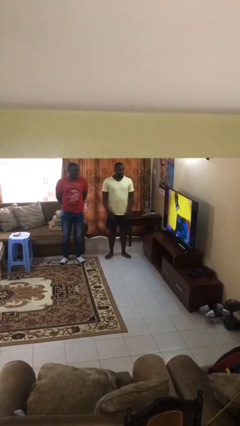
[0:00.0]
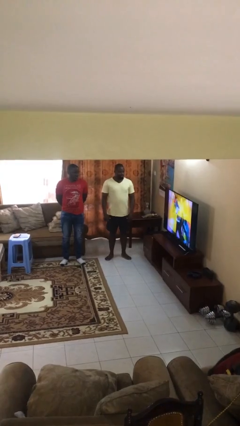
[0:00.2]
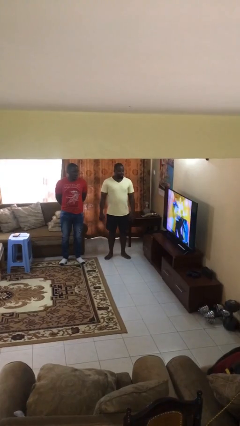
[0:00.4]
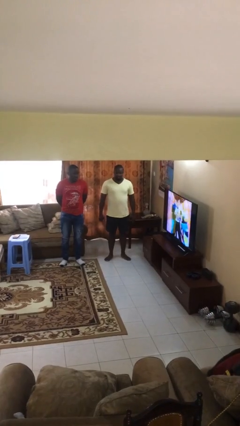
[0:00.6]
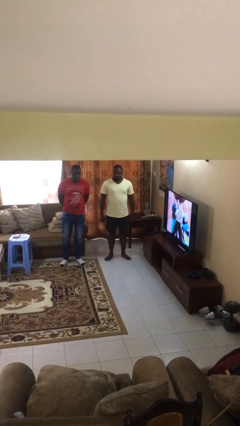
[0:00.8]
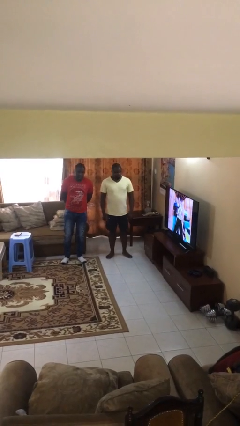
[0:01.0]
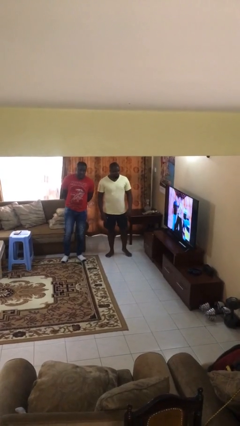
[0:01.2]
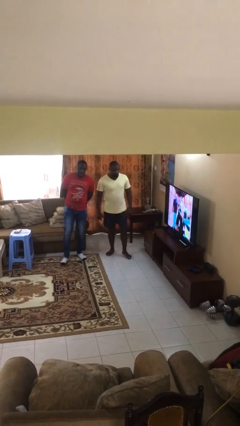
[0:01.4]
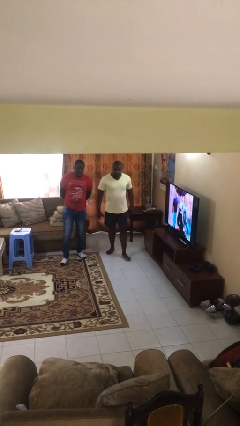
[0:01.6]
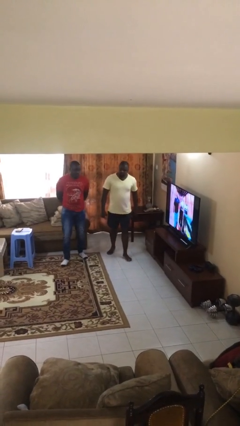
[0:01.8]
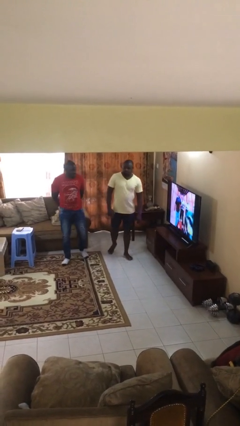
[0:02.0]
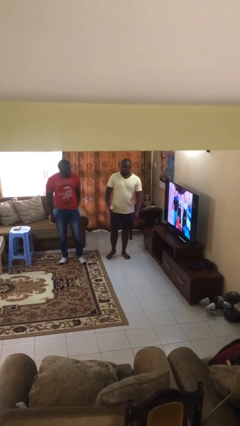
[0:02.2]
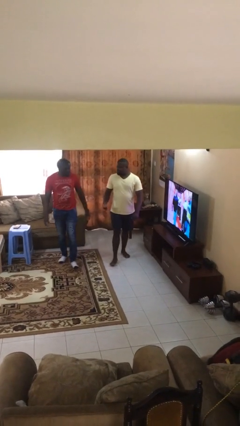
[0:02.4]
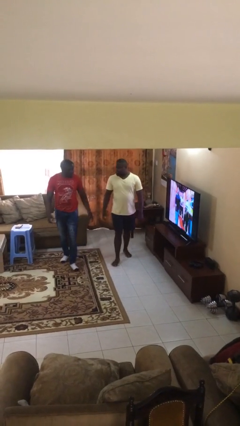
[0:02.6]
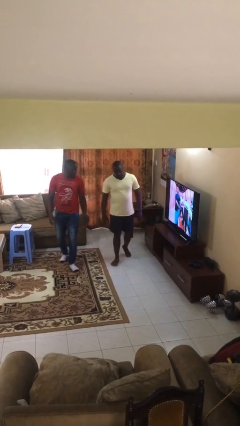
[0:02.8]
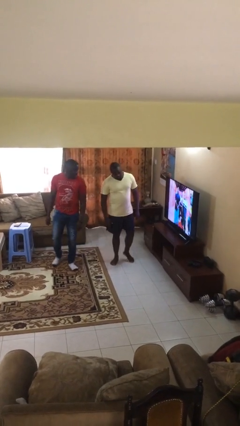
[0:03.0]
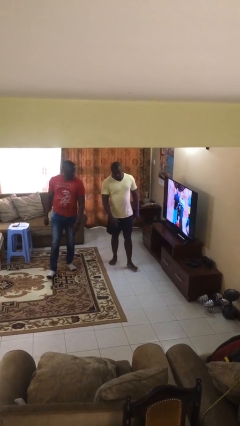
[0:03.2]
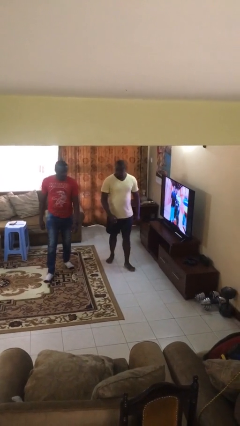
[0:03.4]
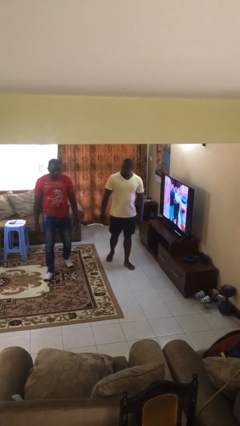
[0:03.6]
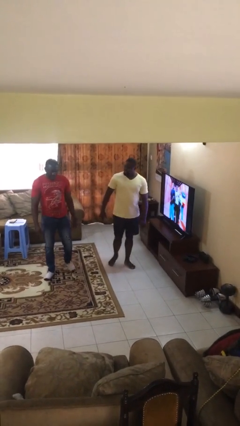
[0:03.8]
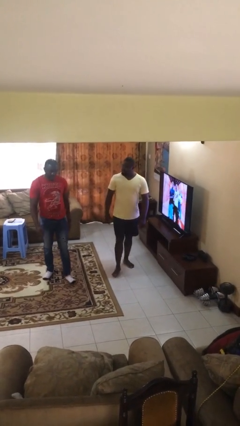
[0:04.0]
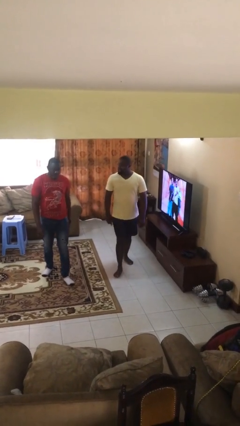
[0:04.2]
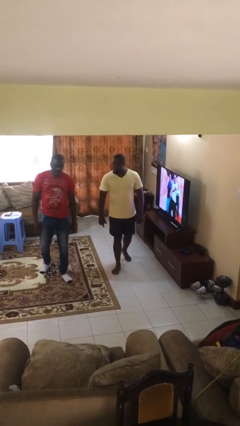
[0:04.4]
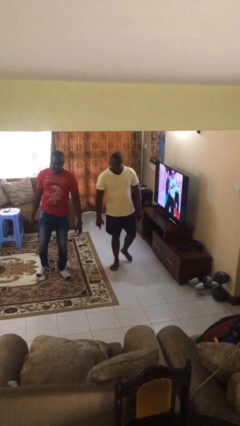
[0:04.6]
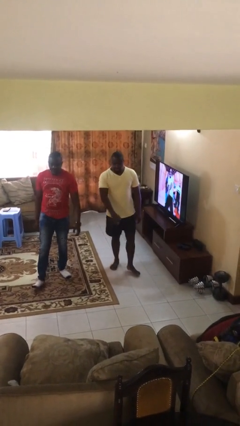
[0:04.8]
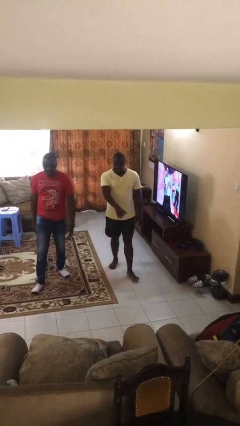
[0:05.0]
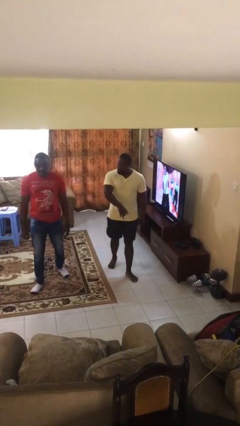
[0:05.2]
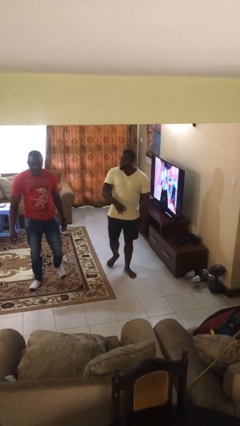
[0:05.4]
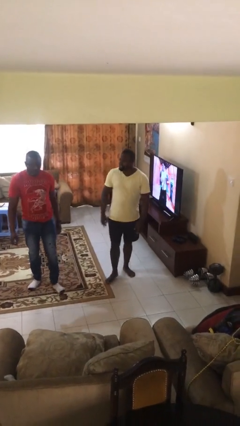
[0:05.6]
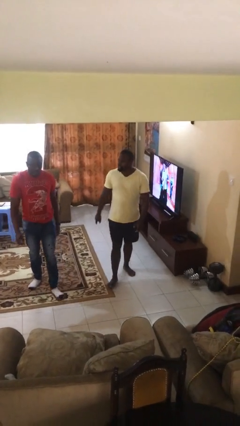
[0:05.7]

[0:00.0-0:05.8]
person talks to person

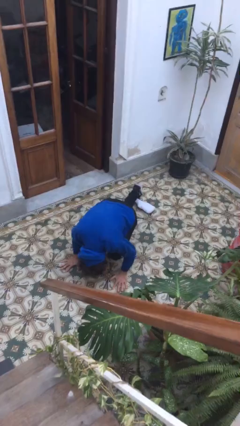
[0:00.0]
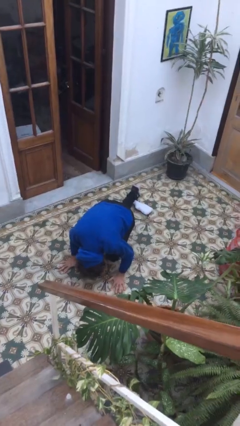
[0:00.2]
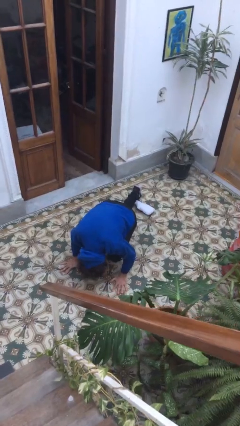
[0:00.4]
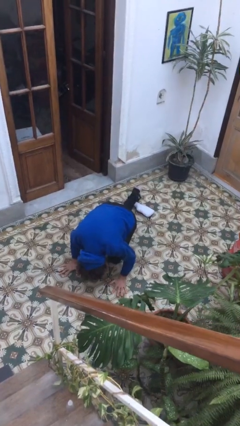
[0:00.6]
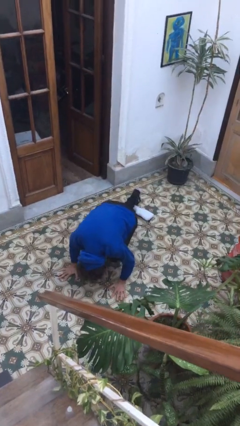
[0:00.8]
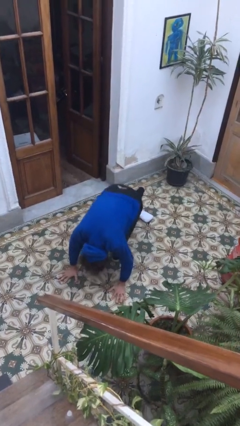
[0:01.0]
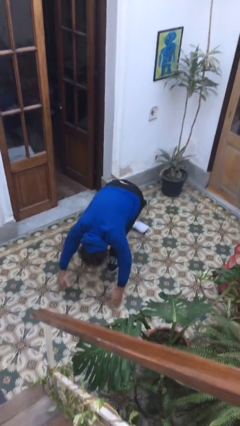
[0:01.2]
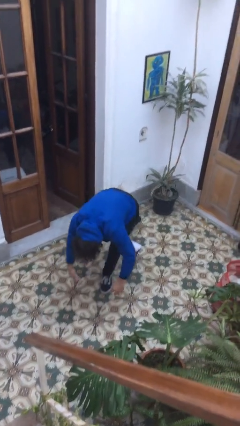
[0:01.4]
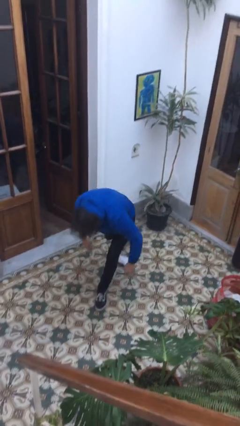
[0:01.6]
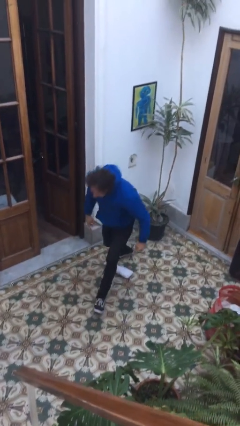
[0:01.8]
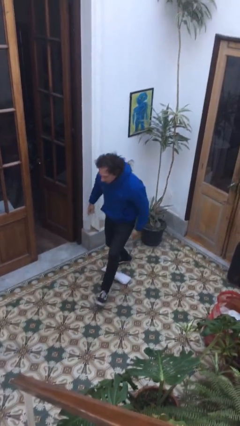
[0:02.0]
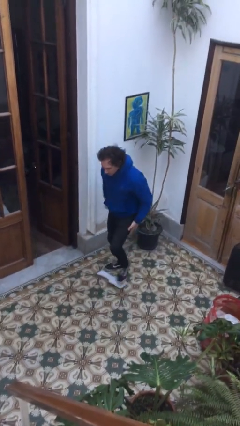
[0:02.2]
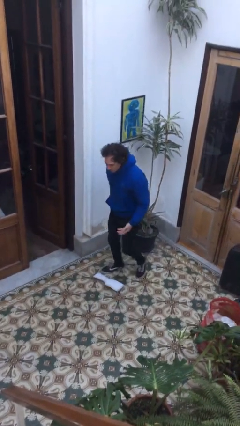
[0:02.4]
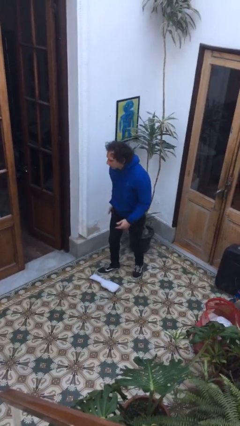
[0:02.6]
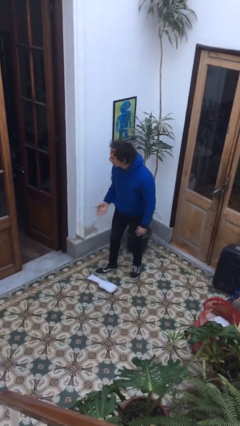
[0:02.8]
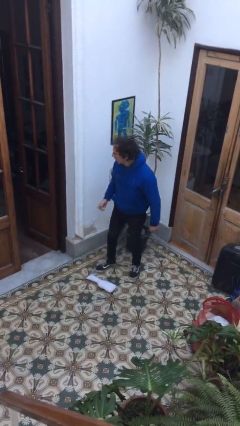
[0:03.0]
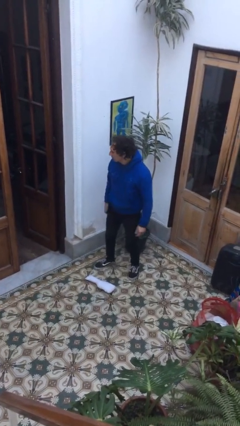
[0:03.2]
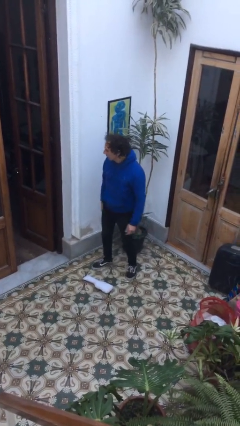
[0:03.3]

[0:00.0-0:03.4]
person stands up from floor

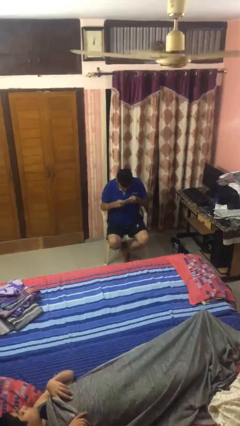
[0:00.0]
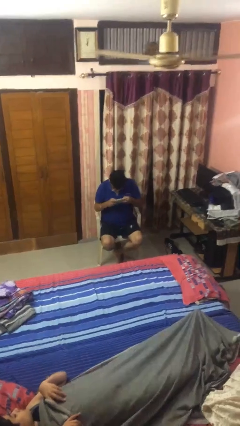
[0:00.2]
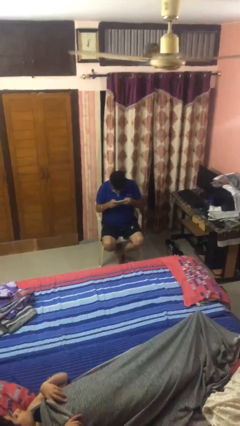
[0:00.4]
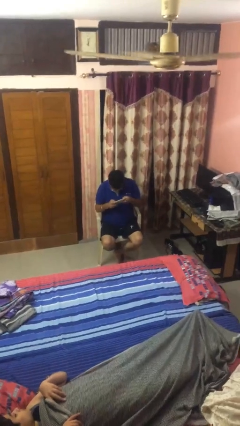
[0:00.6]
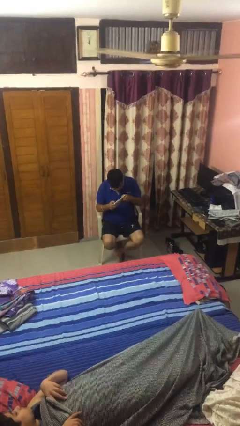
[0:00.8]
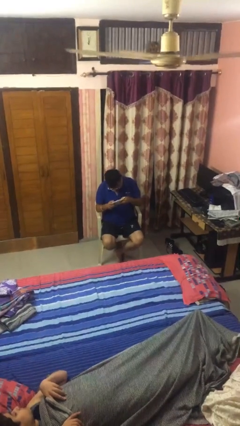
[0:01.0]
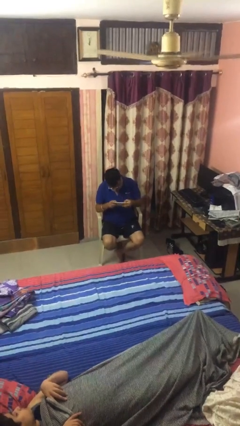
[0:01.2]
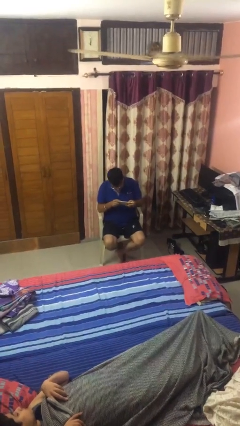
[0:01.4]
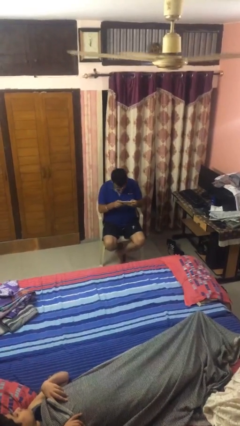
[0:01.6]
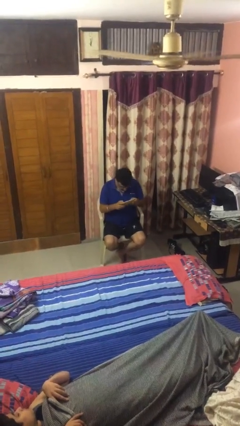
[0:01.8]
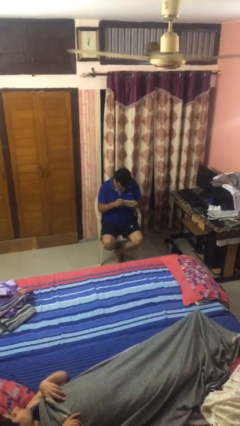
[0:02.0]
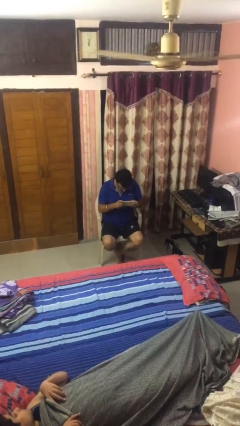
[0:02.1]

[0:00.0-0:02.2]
person interacts with handheld game

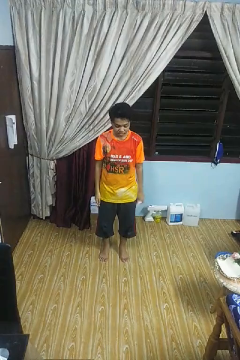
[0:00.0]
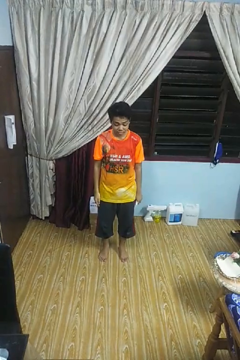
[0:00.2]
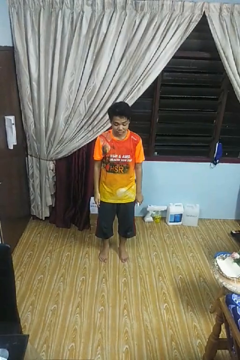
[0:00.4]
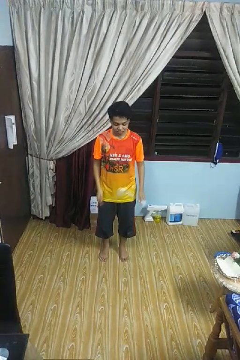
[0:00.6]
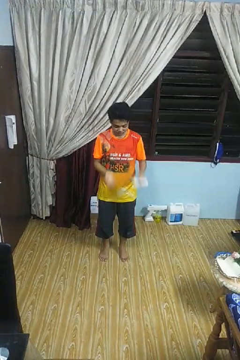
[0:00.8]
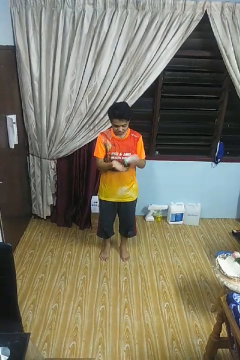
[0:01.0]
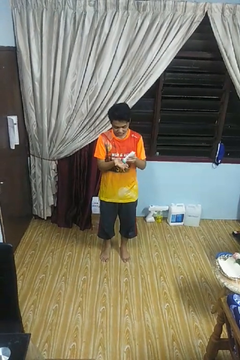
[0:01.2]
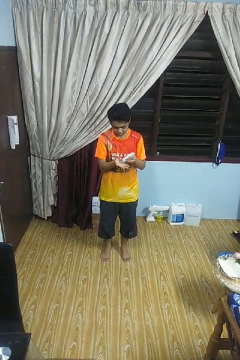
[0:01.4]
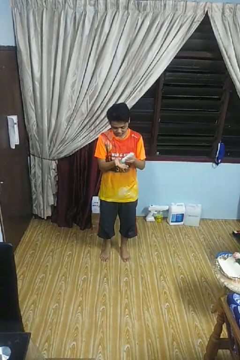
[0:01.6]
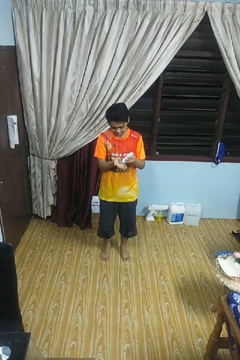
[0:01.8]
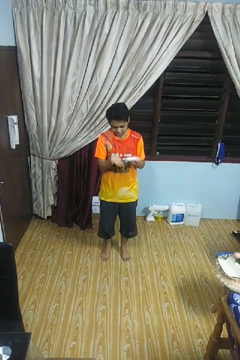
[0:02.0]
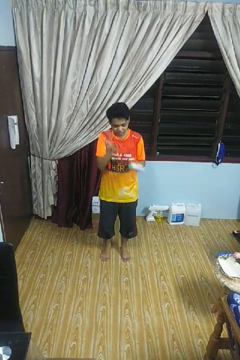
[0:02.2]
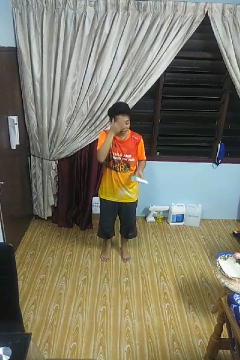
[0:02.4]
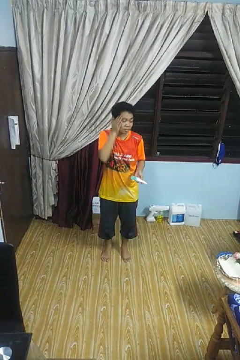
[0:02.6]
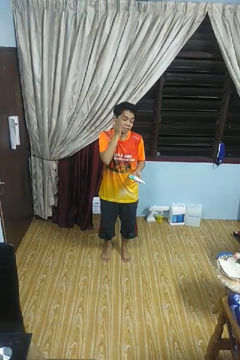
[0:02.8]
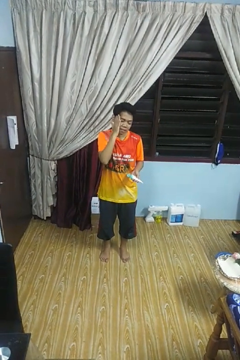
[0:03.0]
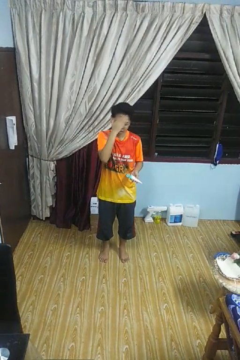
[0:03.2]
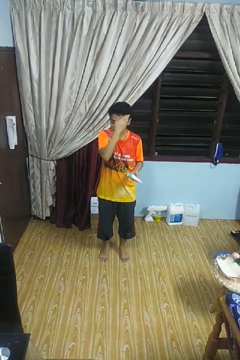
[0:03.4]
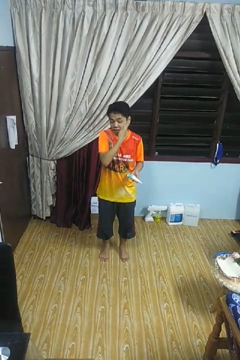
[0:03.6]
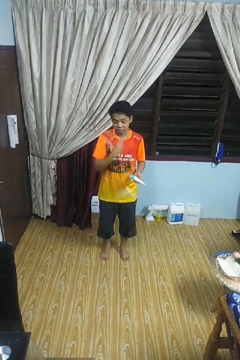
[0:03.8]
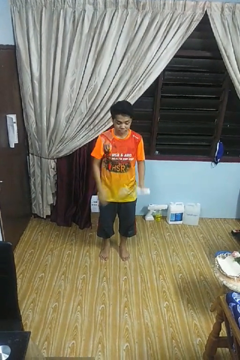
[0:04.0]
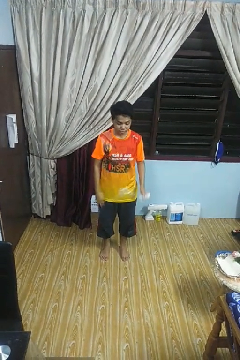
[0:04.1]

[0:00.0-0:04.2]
person applies facial moisturizer

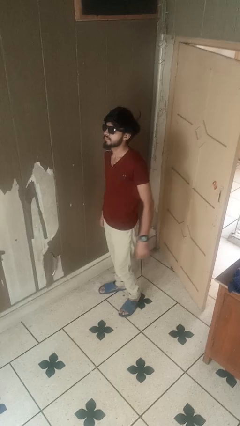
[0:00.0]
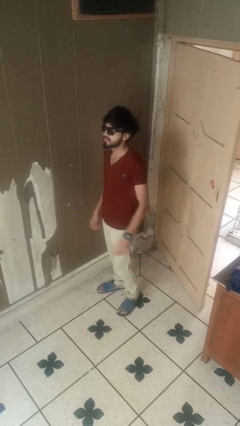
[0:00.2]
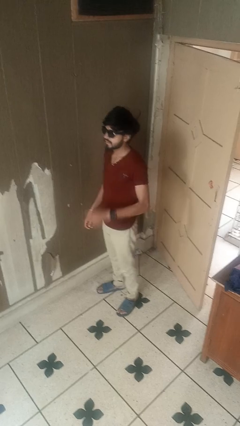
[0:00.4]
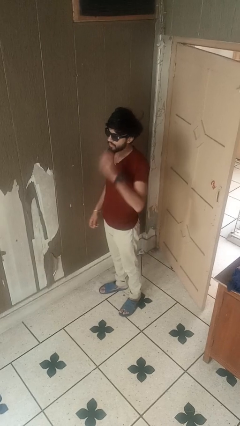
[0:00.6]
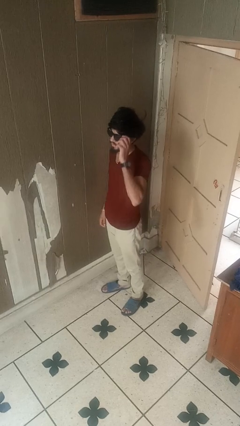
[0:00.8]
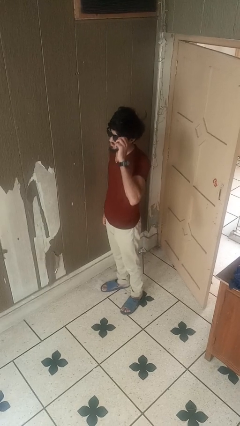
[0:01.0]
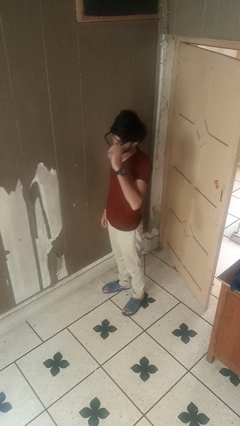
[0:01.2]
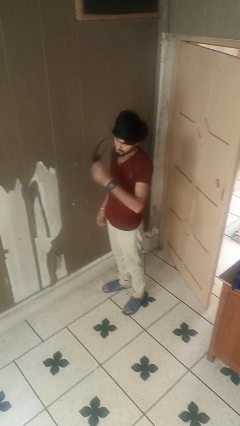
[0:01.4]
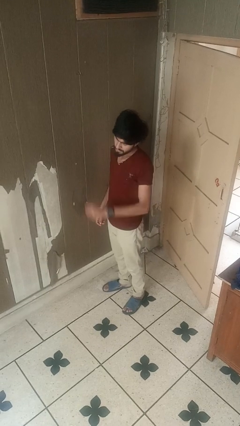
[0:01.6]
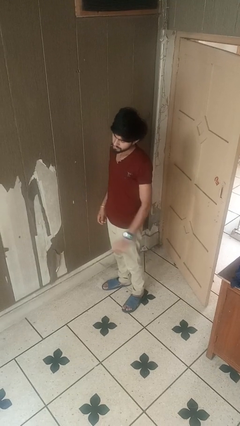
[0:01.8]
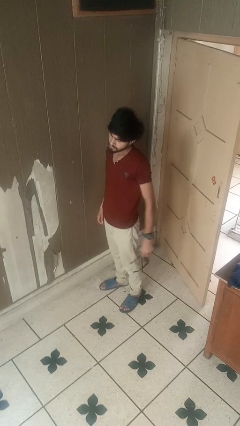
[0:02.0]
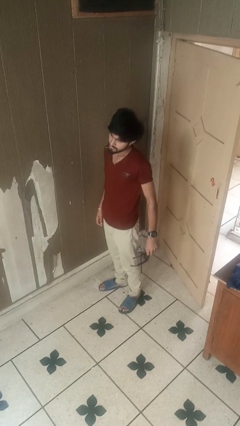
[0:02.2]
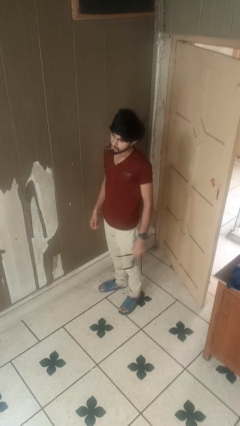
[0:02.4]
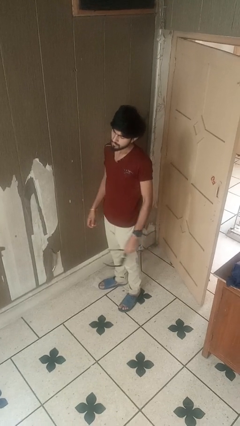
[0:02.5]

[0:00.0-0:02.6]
person takes off sunglasses
